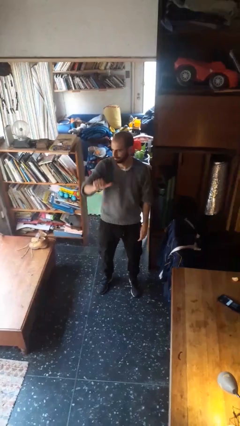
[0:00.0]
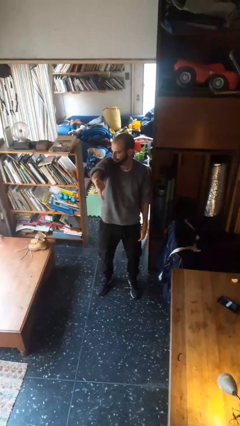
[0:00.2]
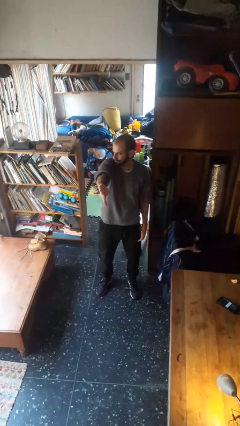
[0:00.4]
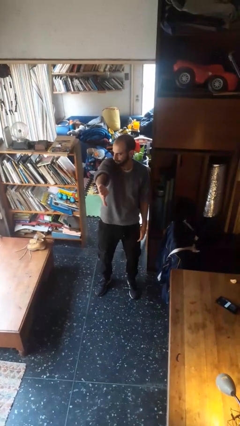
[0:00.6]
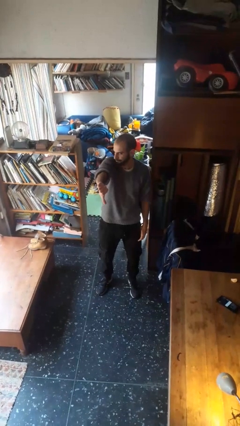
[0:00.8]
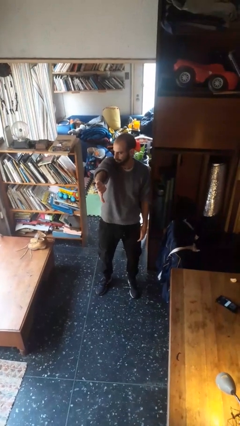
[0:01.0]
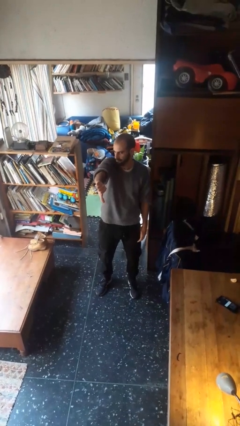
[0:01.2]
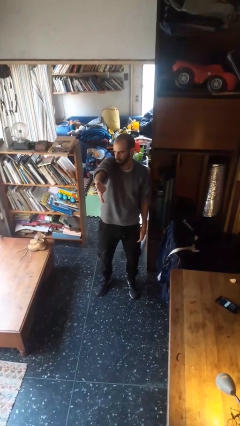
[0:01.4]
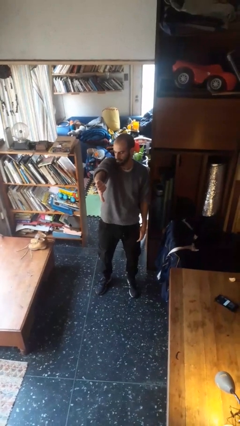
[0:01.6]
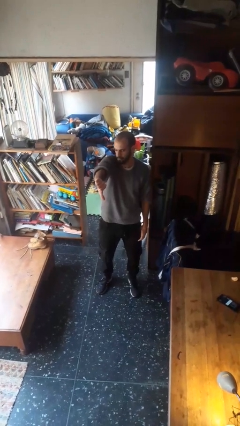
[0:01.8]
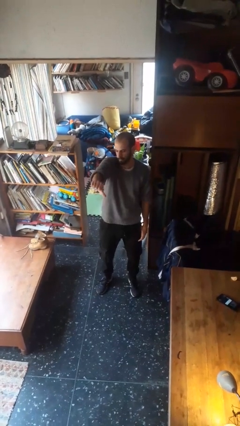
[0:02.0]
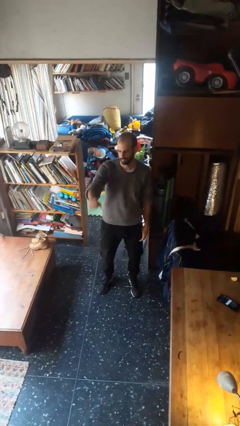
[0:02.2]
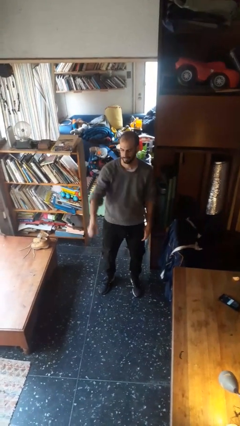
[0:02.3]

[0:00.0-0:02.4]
person gestures thumbs down

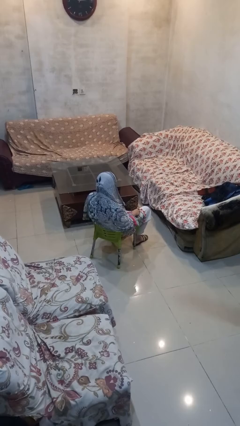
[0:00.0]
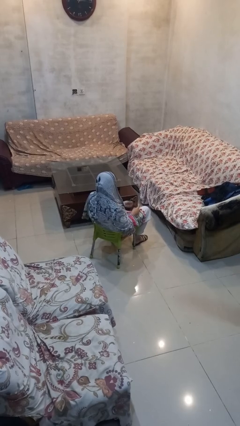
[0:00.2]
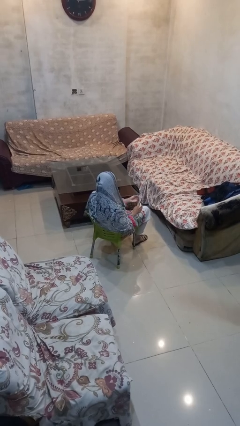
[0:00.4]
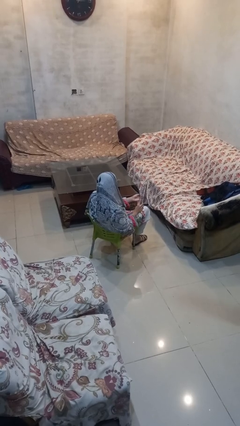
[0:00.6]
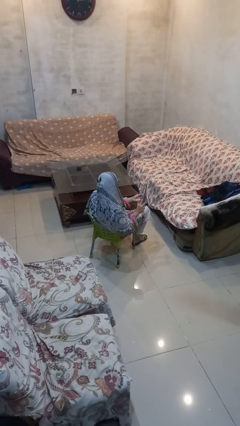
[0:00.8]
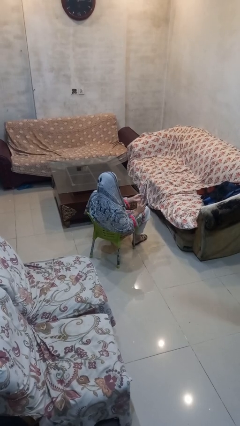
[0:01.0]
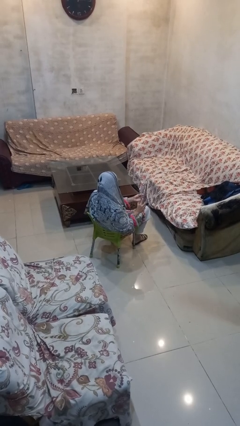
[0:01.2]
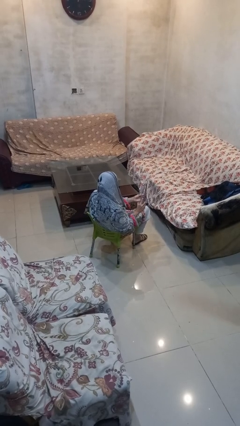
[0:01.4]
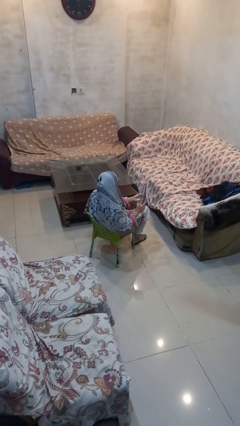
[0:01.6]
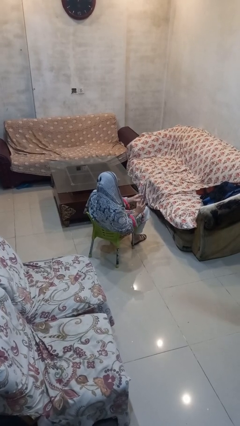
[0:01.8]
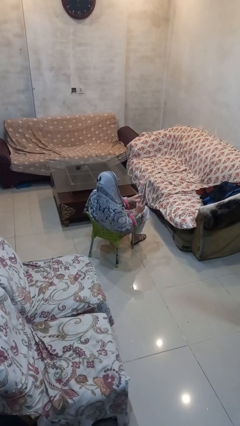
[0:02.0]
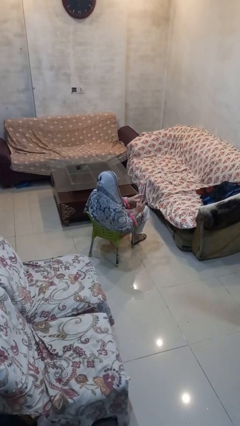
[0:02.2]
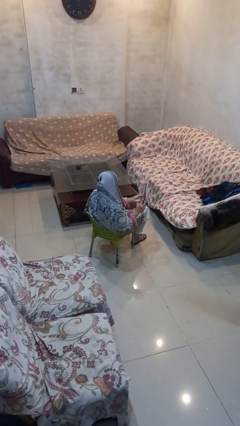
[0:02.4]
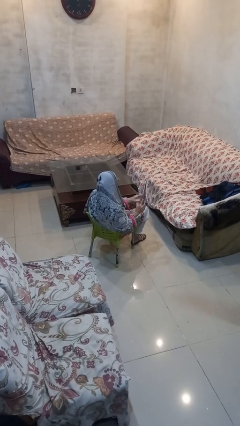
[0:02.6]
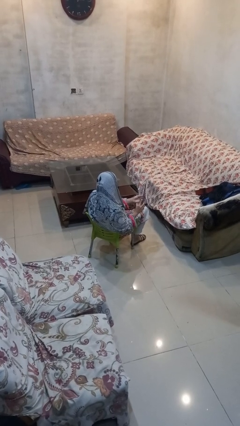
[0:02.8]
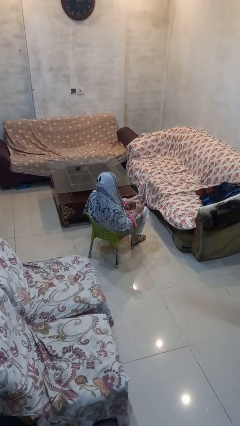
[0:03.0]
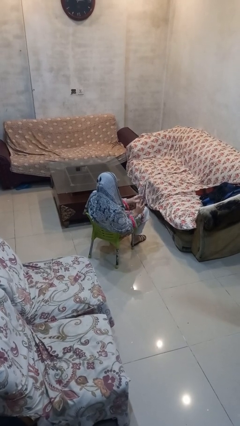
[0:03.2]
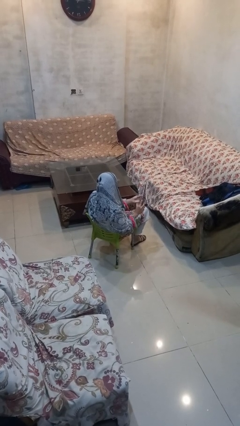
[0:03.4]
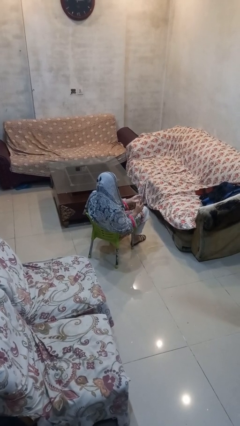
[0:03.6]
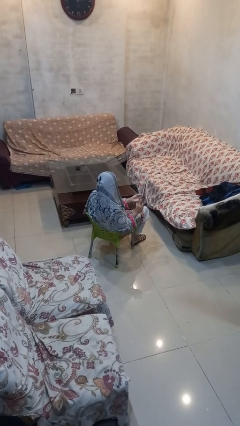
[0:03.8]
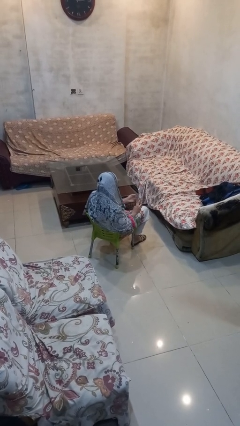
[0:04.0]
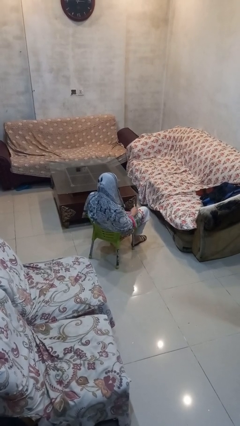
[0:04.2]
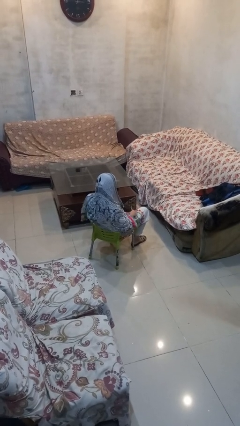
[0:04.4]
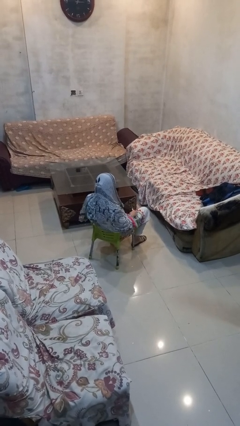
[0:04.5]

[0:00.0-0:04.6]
person files fingernails

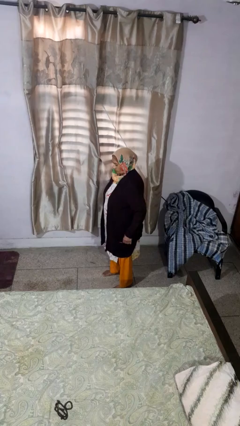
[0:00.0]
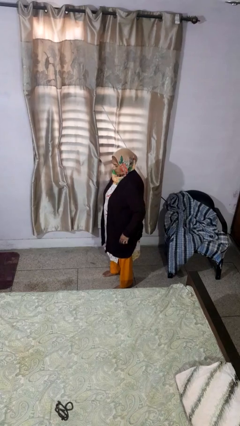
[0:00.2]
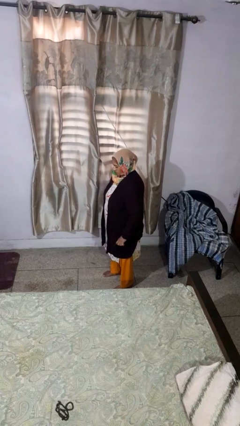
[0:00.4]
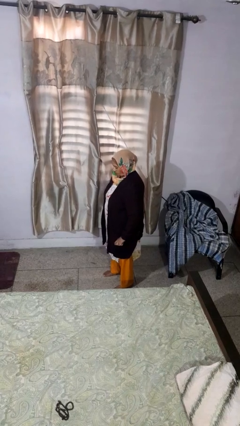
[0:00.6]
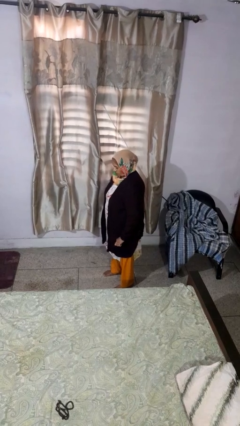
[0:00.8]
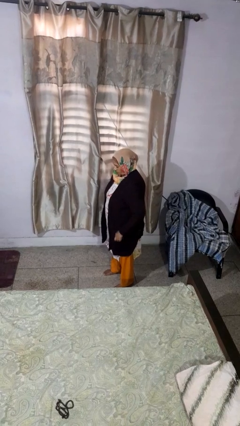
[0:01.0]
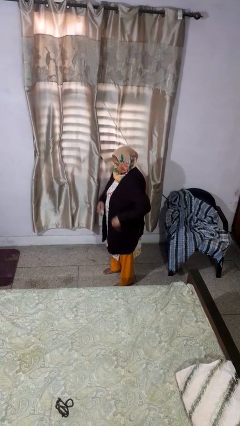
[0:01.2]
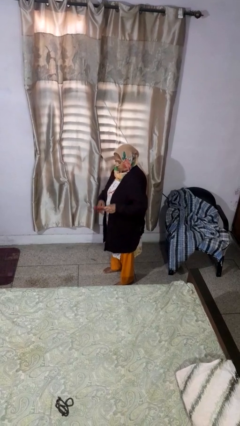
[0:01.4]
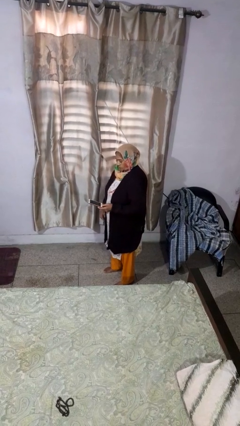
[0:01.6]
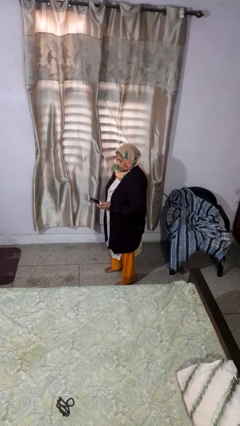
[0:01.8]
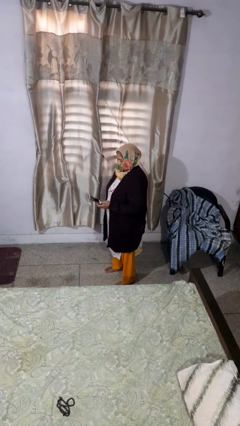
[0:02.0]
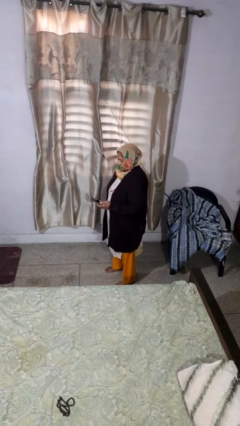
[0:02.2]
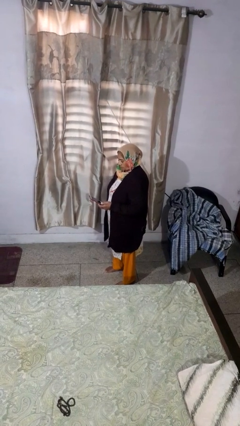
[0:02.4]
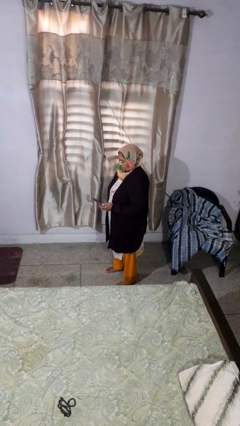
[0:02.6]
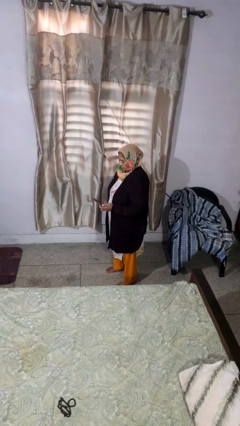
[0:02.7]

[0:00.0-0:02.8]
person takes phone from pocket

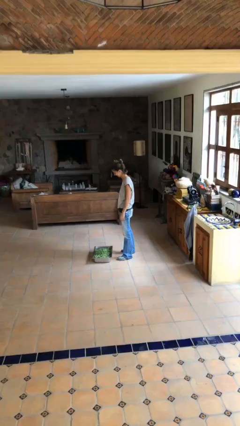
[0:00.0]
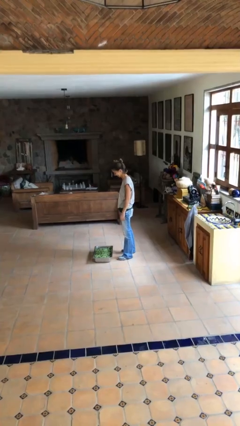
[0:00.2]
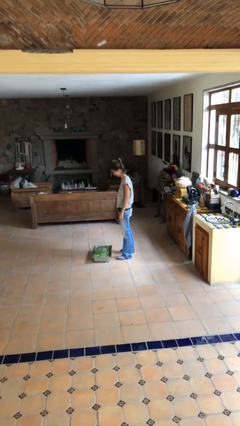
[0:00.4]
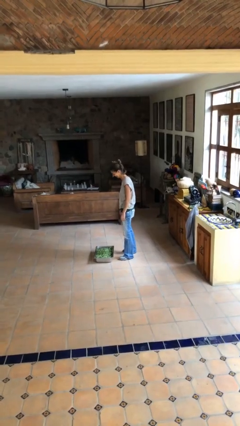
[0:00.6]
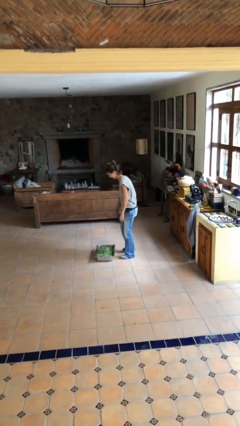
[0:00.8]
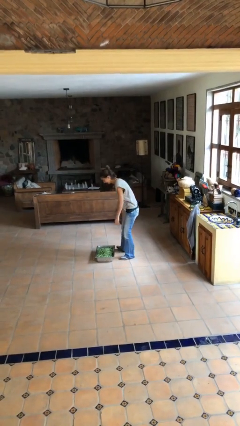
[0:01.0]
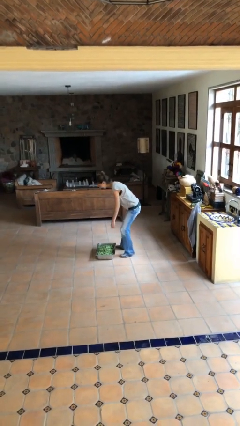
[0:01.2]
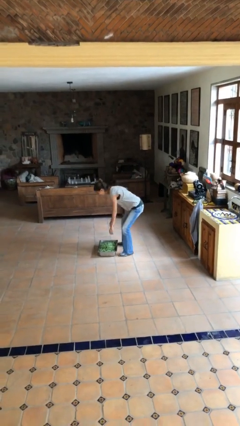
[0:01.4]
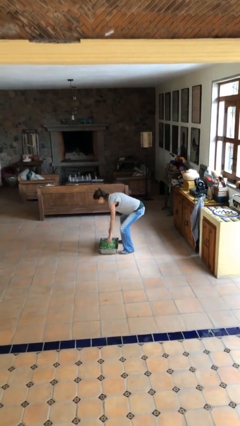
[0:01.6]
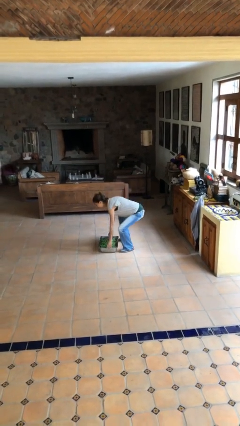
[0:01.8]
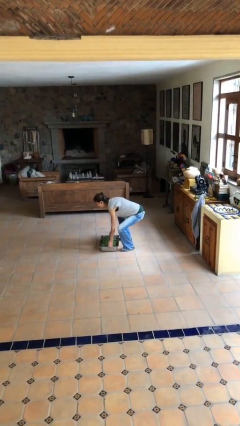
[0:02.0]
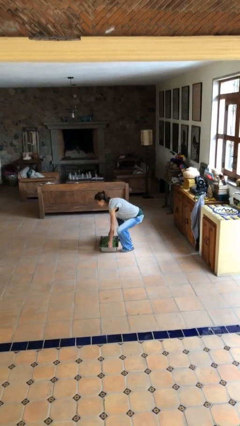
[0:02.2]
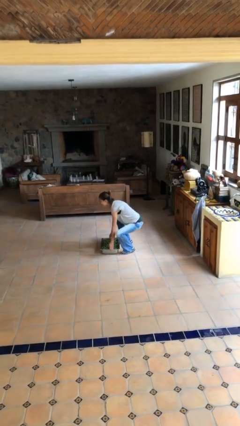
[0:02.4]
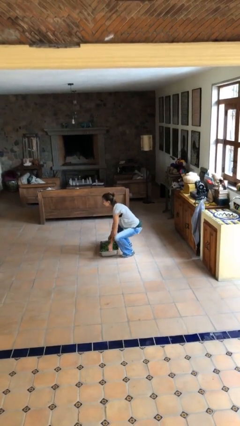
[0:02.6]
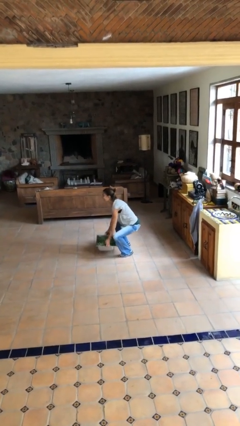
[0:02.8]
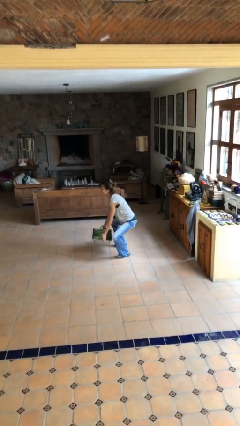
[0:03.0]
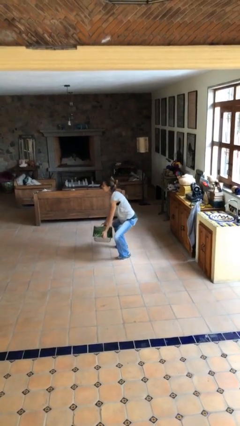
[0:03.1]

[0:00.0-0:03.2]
person picks up object from floor

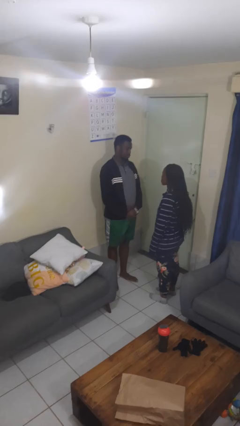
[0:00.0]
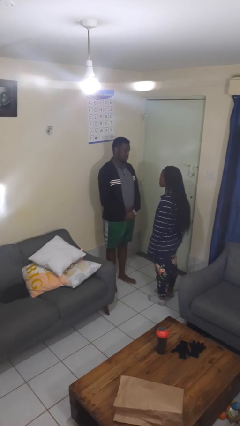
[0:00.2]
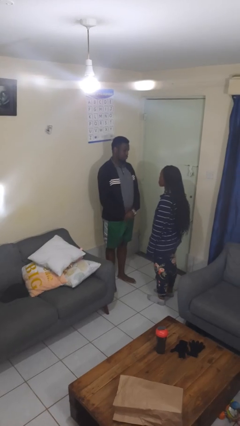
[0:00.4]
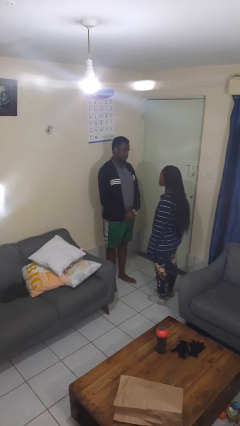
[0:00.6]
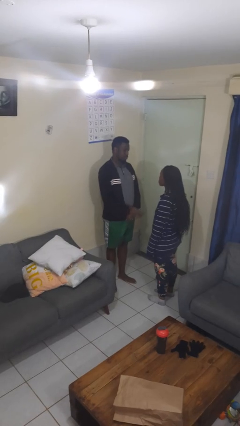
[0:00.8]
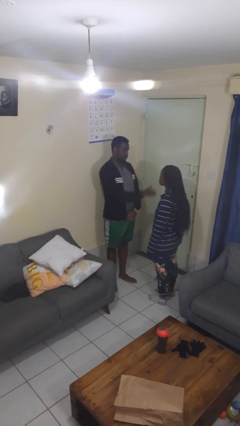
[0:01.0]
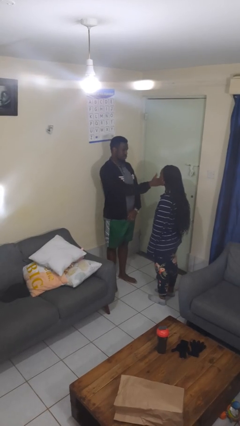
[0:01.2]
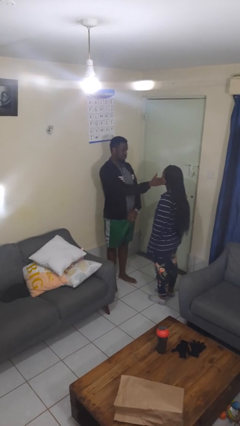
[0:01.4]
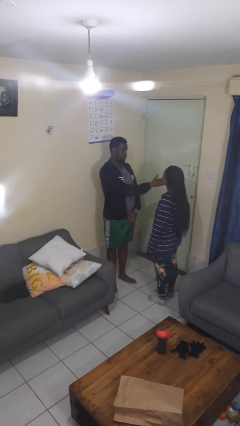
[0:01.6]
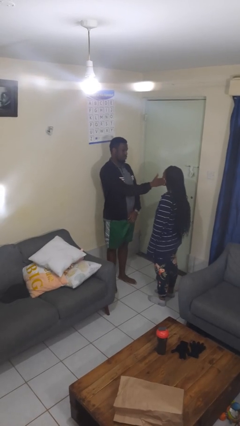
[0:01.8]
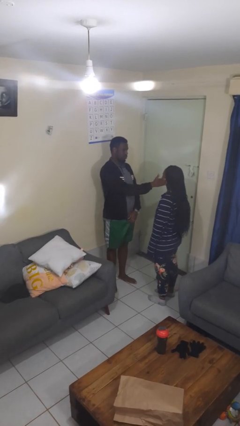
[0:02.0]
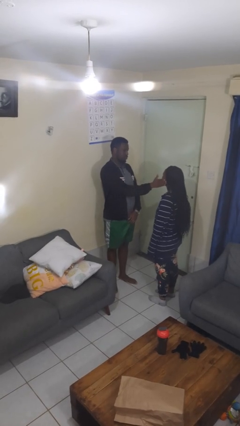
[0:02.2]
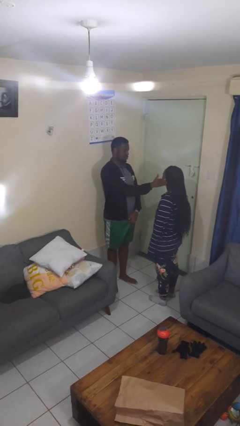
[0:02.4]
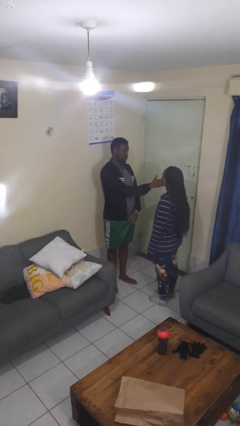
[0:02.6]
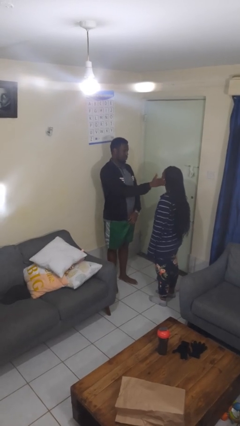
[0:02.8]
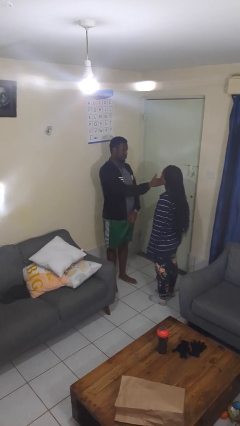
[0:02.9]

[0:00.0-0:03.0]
person touches face of person

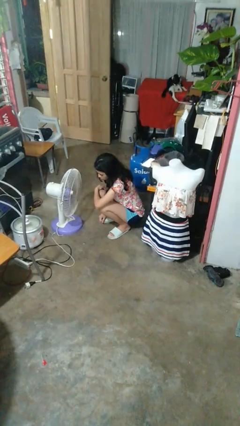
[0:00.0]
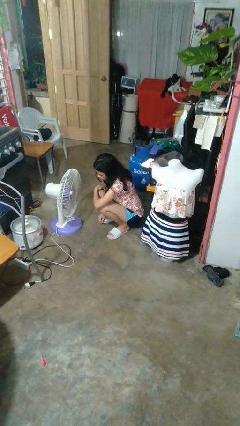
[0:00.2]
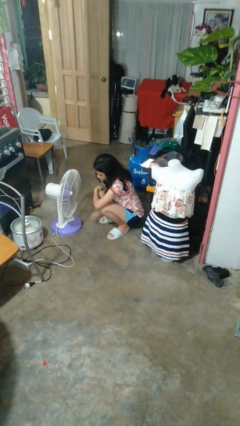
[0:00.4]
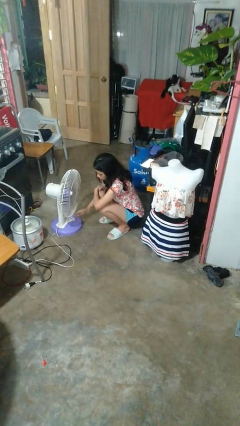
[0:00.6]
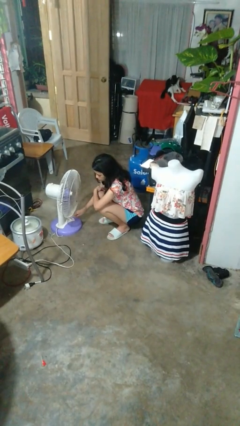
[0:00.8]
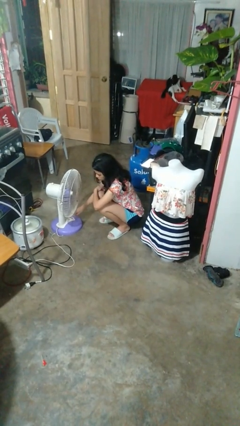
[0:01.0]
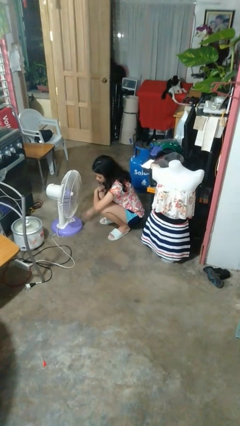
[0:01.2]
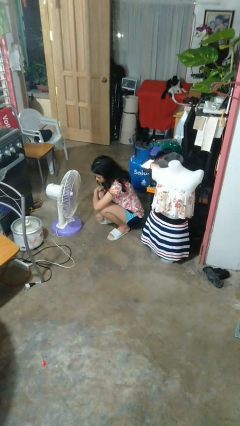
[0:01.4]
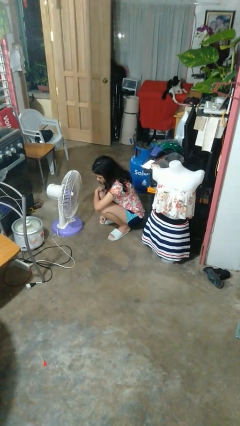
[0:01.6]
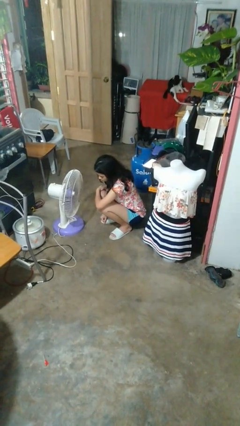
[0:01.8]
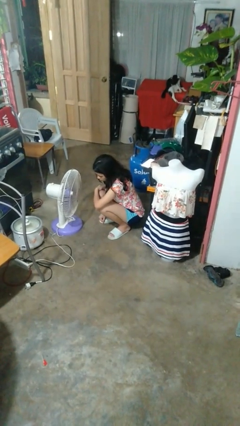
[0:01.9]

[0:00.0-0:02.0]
person turns on fan
